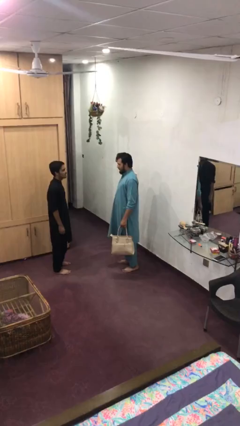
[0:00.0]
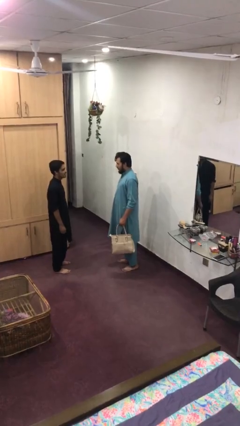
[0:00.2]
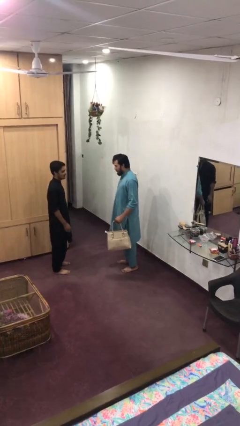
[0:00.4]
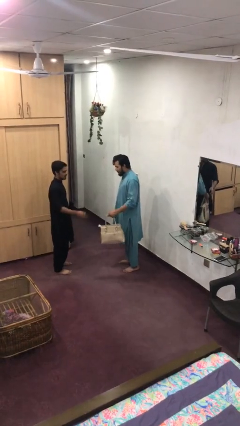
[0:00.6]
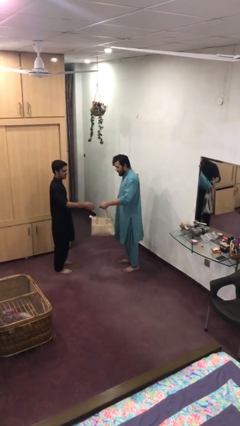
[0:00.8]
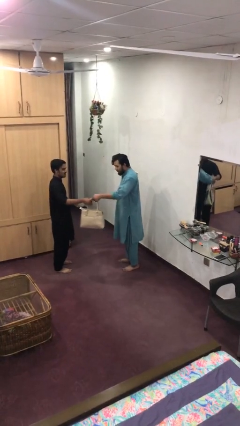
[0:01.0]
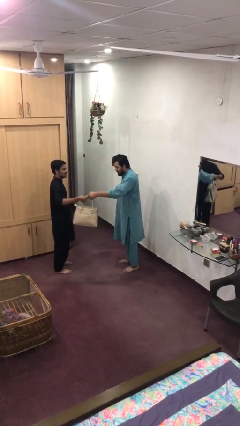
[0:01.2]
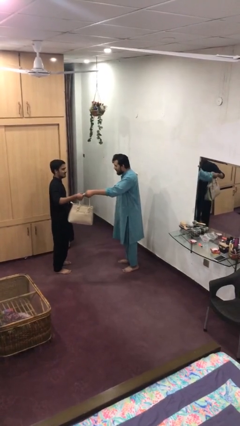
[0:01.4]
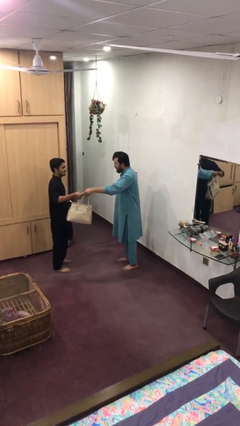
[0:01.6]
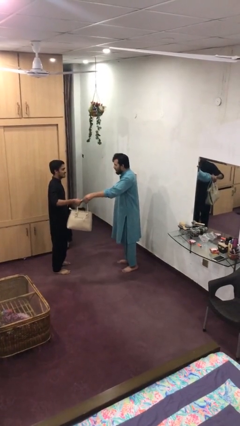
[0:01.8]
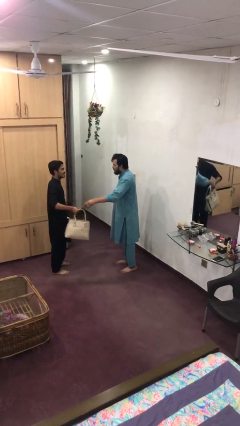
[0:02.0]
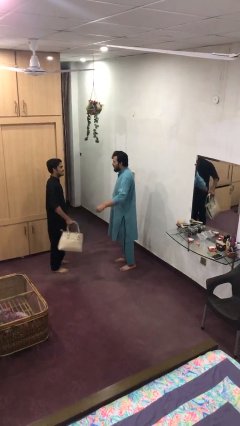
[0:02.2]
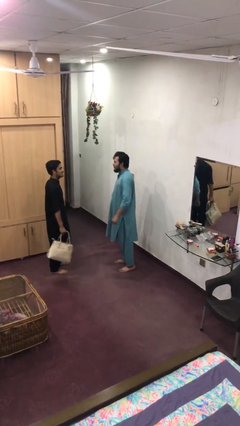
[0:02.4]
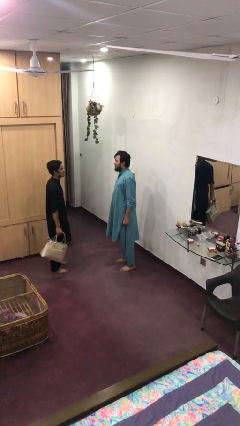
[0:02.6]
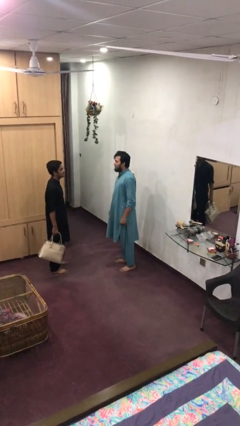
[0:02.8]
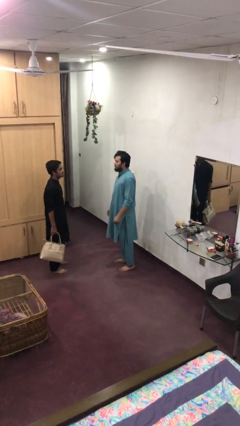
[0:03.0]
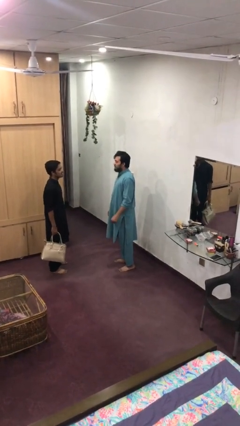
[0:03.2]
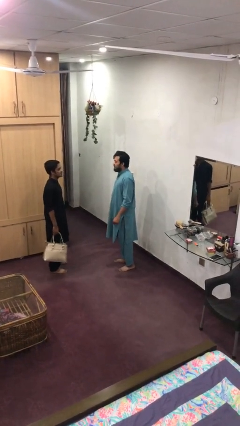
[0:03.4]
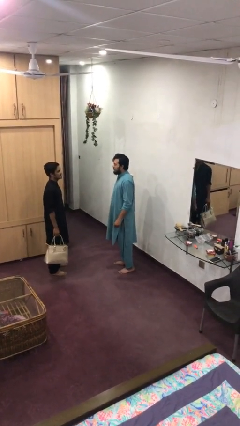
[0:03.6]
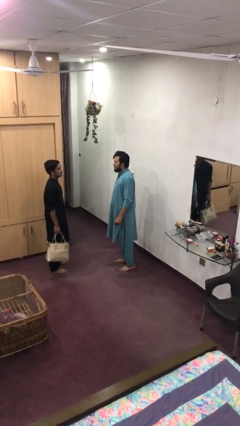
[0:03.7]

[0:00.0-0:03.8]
person transfers object to person

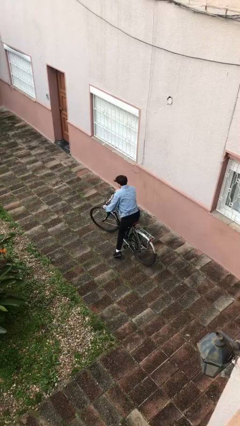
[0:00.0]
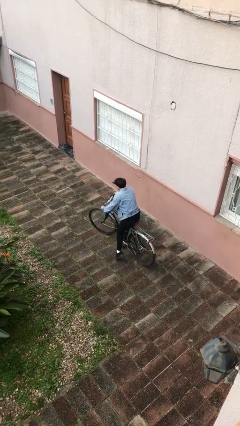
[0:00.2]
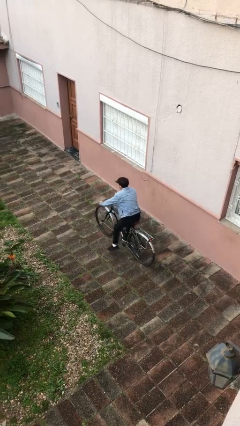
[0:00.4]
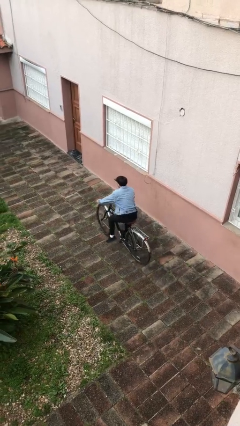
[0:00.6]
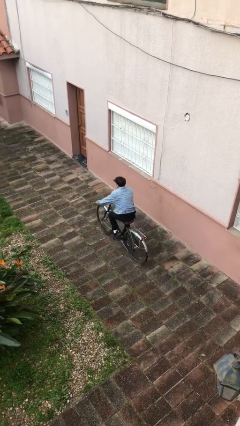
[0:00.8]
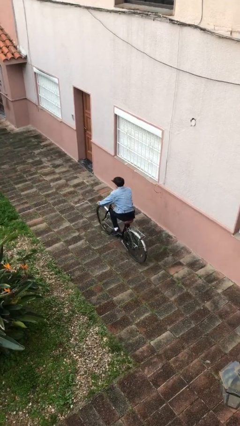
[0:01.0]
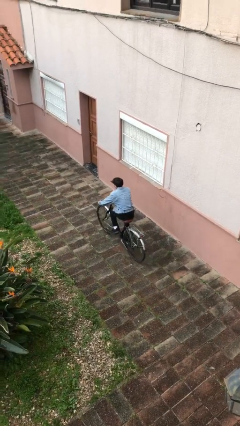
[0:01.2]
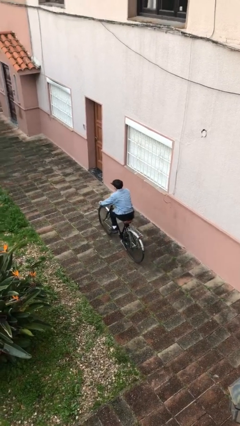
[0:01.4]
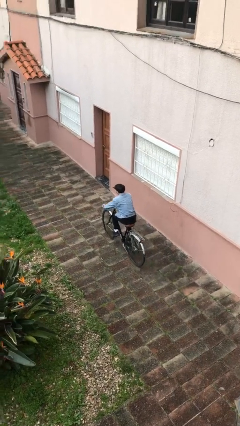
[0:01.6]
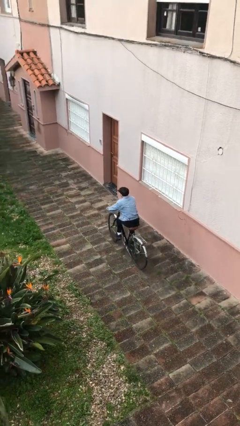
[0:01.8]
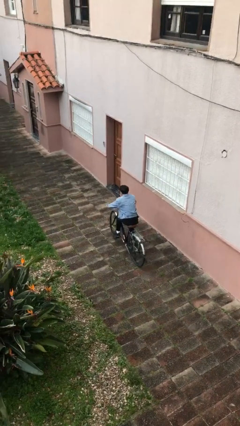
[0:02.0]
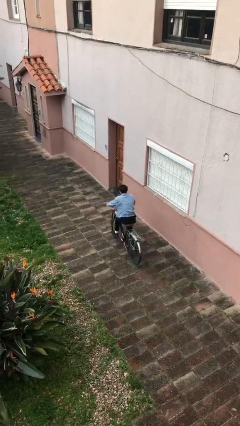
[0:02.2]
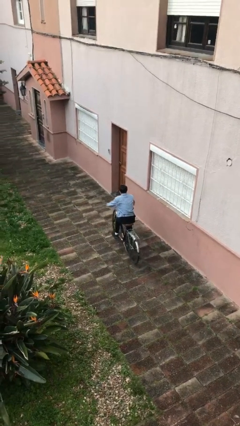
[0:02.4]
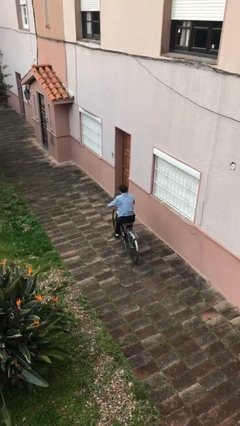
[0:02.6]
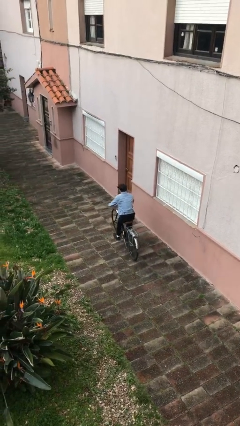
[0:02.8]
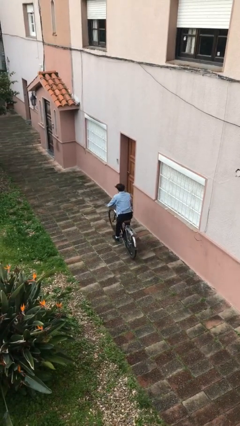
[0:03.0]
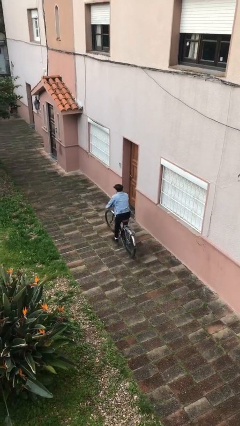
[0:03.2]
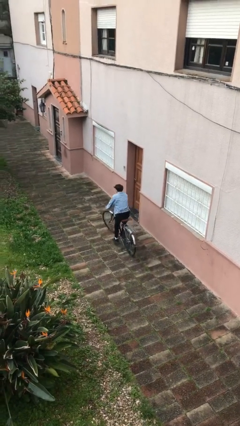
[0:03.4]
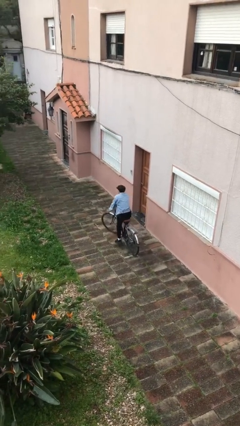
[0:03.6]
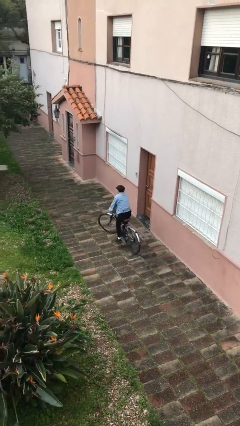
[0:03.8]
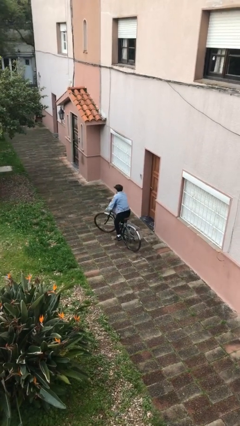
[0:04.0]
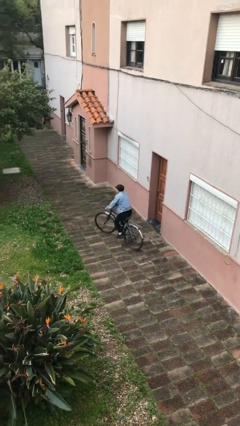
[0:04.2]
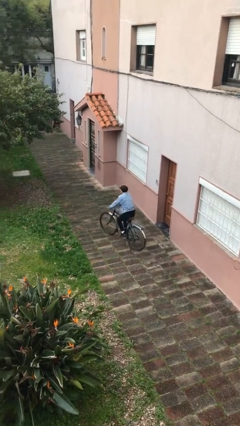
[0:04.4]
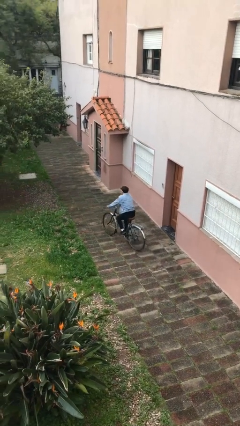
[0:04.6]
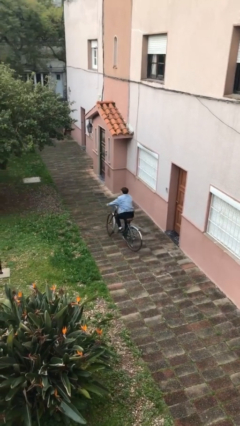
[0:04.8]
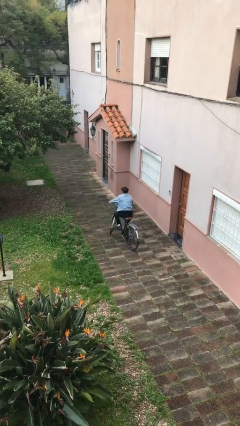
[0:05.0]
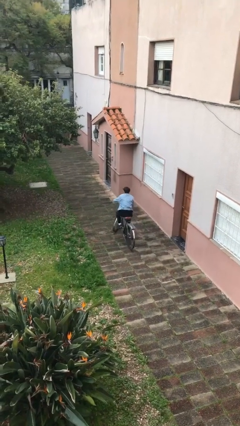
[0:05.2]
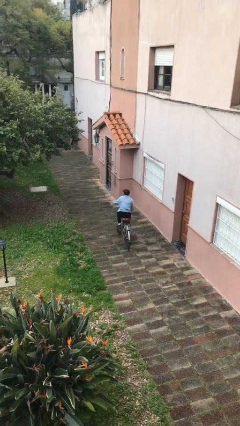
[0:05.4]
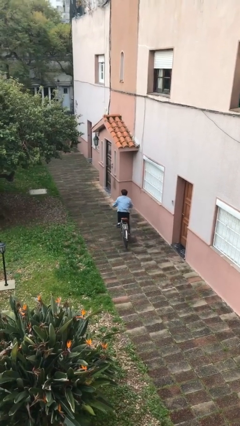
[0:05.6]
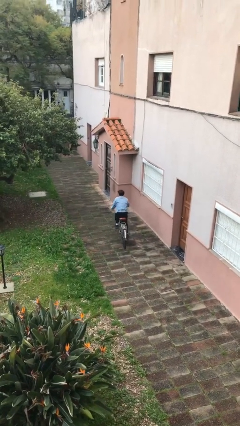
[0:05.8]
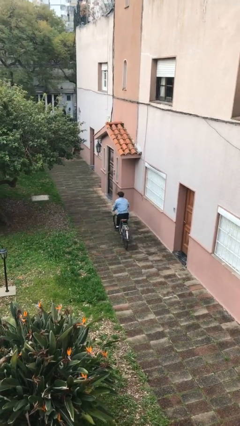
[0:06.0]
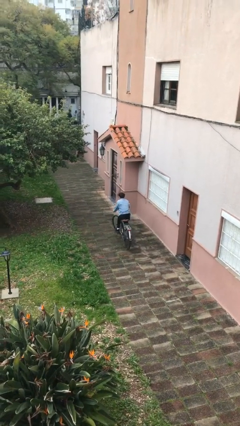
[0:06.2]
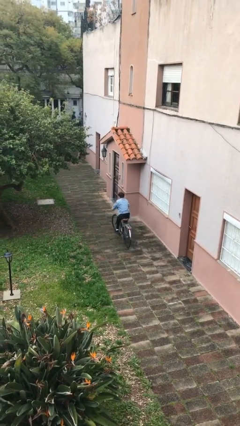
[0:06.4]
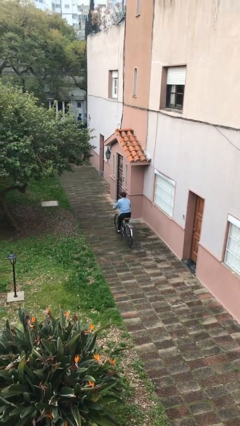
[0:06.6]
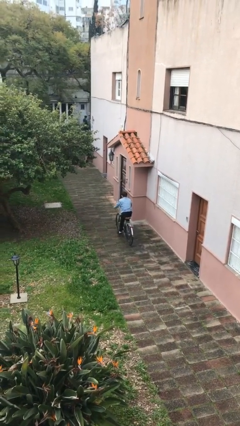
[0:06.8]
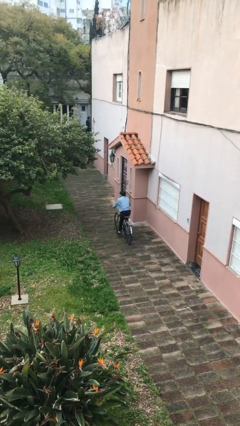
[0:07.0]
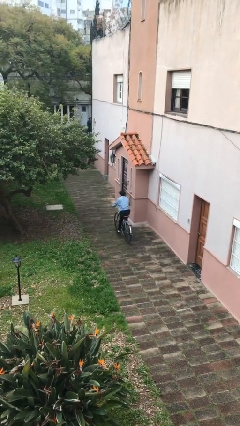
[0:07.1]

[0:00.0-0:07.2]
person rides bicycle

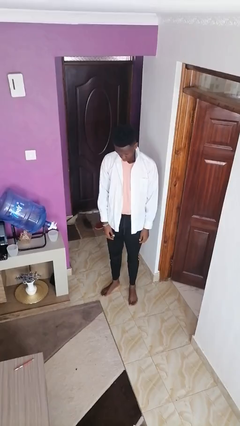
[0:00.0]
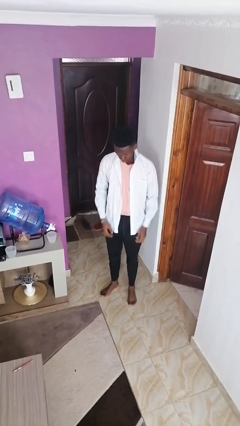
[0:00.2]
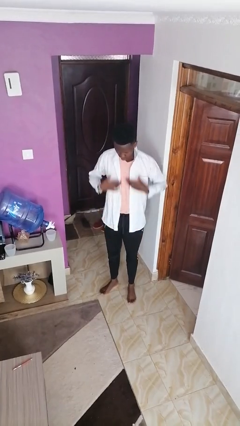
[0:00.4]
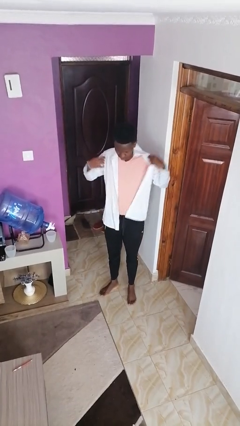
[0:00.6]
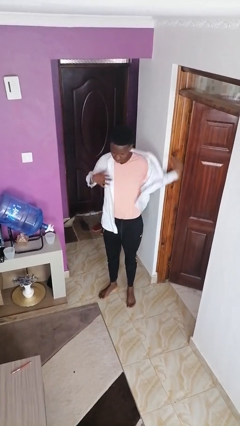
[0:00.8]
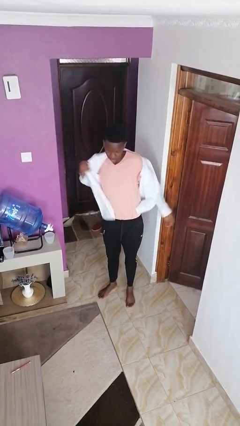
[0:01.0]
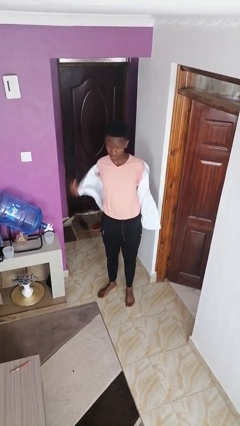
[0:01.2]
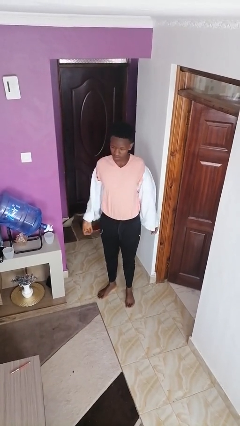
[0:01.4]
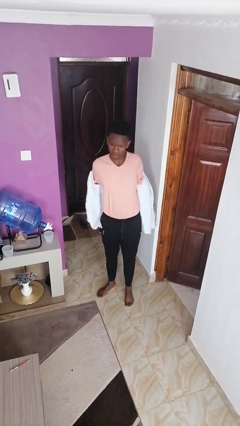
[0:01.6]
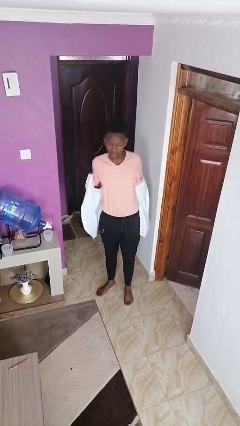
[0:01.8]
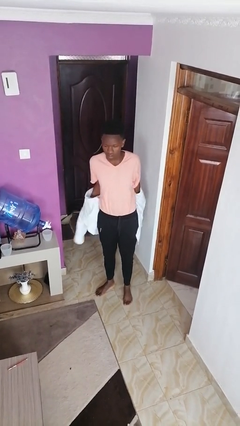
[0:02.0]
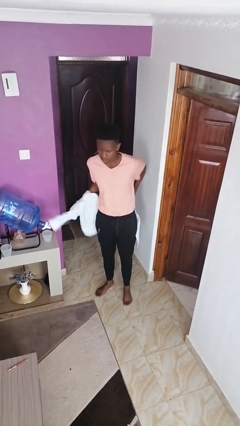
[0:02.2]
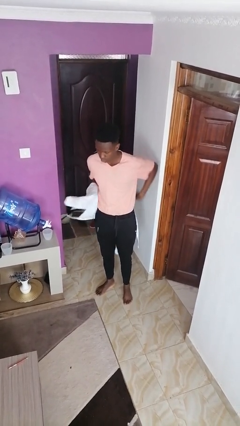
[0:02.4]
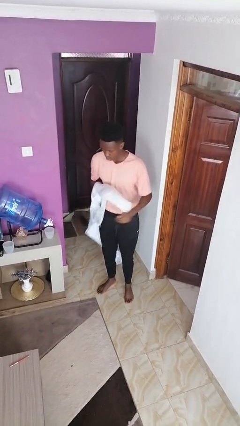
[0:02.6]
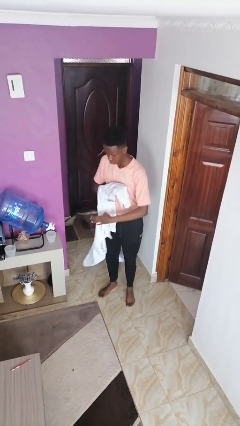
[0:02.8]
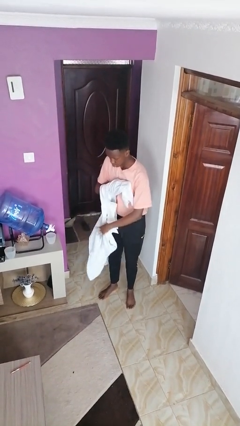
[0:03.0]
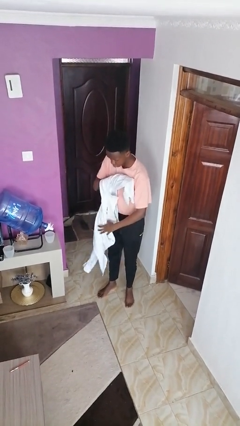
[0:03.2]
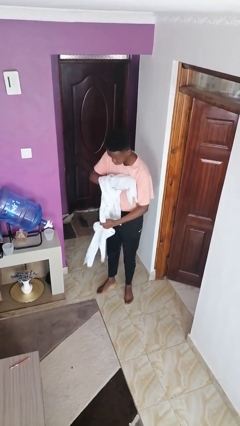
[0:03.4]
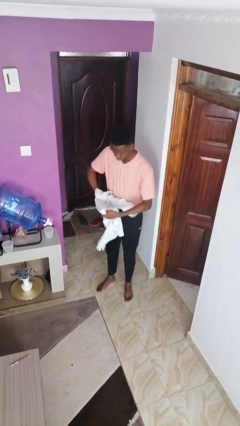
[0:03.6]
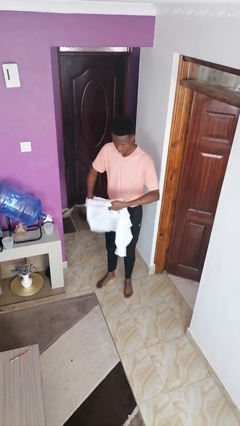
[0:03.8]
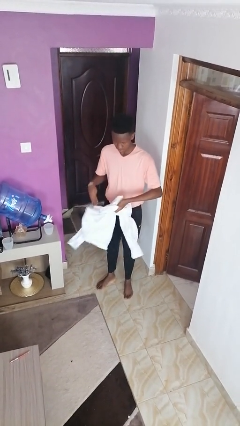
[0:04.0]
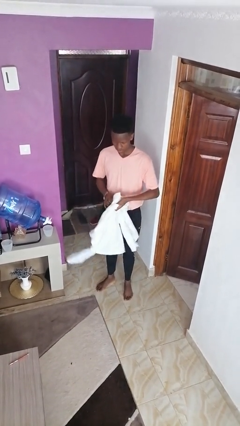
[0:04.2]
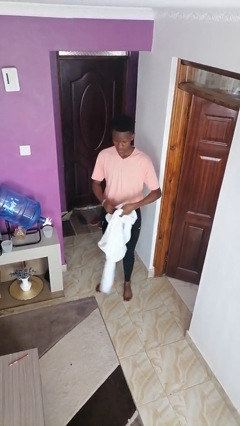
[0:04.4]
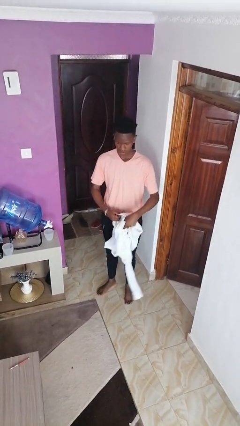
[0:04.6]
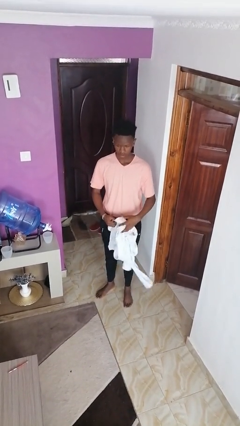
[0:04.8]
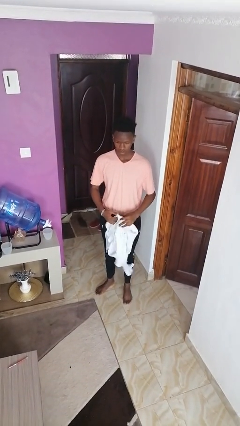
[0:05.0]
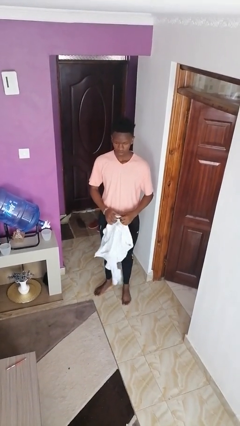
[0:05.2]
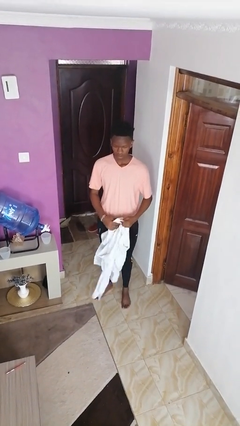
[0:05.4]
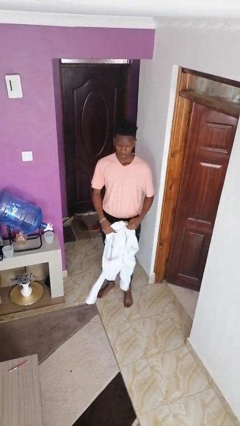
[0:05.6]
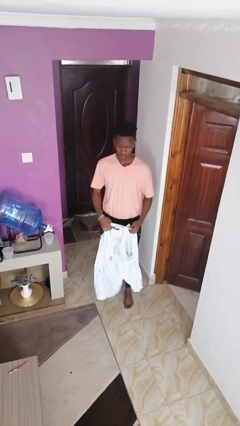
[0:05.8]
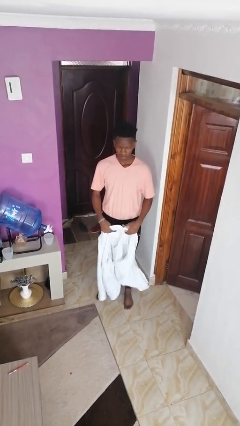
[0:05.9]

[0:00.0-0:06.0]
person takes off shirt

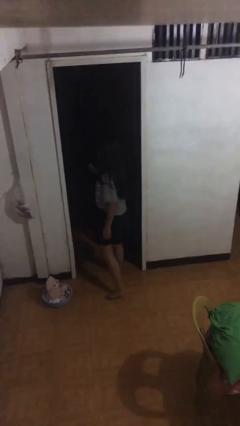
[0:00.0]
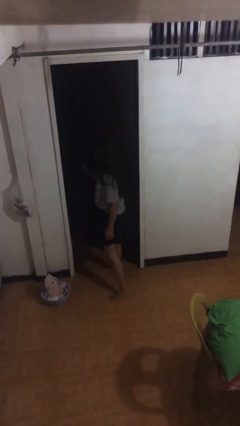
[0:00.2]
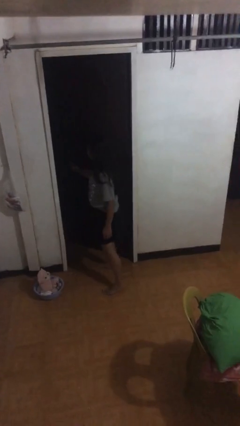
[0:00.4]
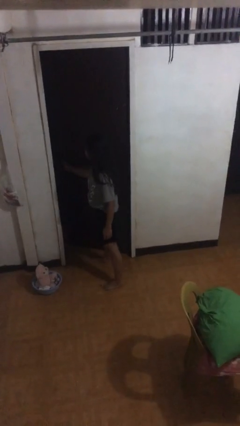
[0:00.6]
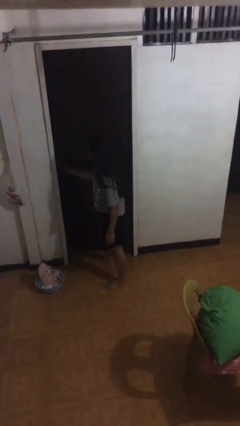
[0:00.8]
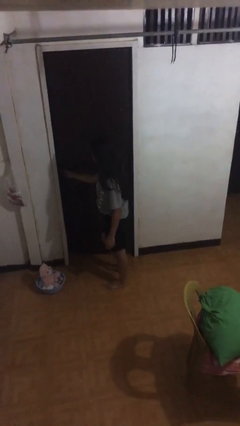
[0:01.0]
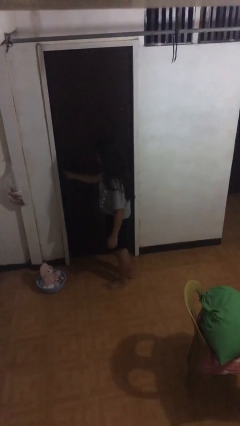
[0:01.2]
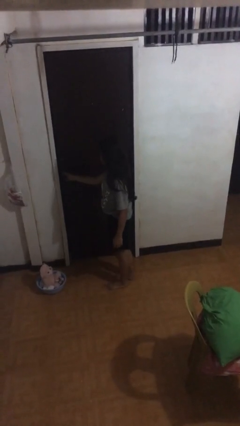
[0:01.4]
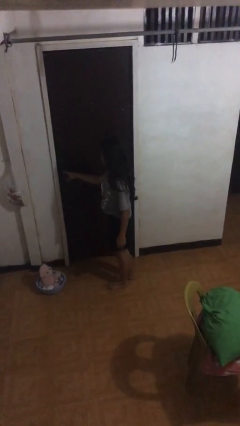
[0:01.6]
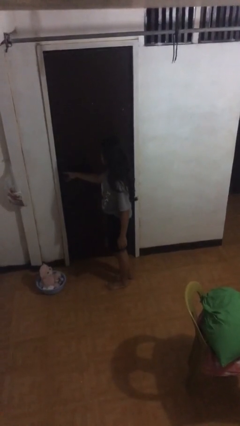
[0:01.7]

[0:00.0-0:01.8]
person closes facility door
